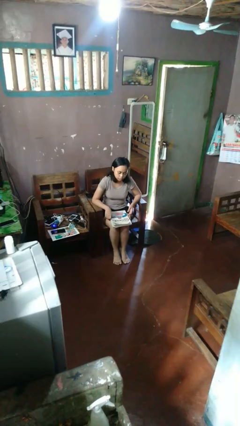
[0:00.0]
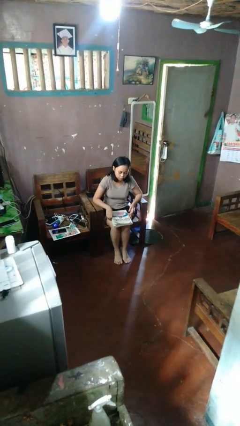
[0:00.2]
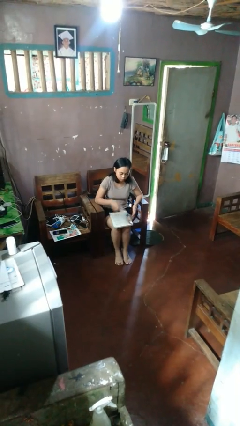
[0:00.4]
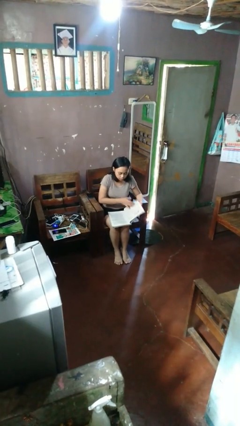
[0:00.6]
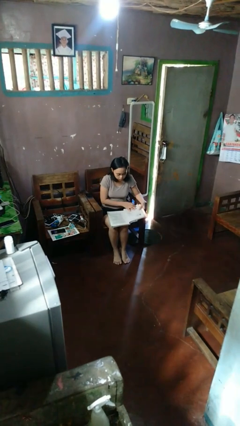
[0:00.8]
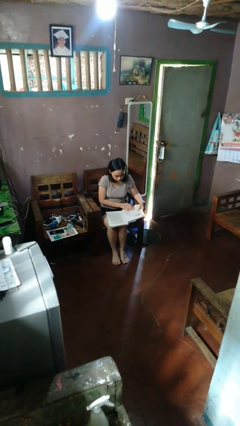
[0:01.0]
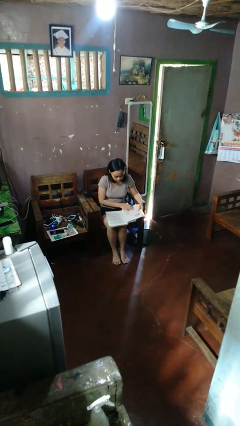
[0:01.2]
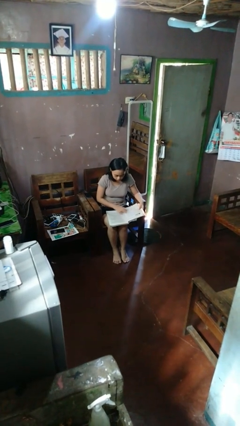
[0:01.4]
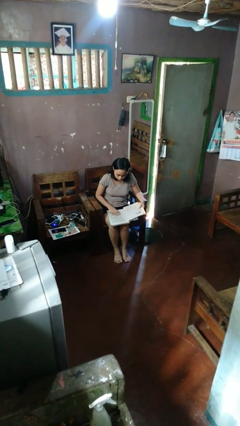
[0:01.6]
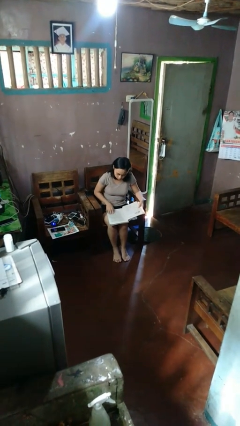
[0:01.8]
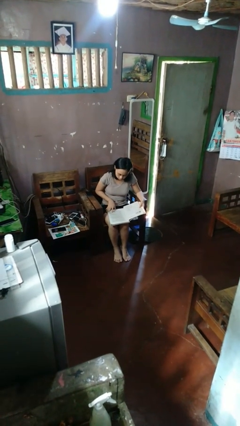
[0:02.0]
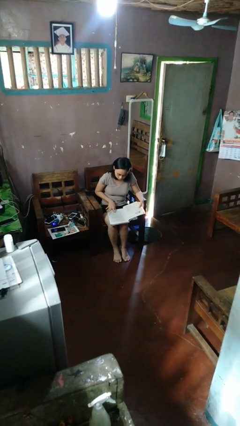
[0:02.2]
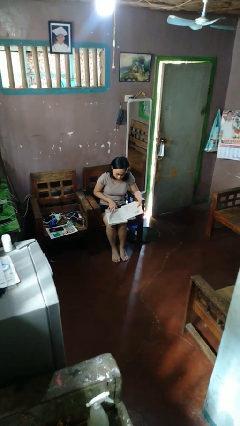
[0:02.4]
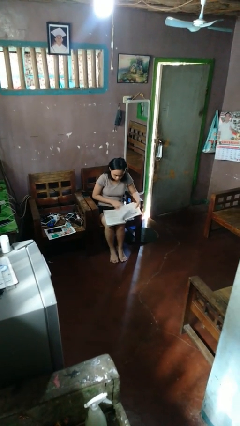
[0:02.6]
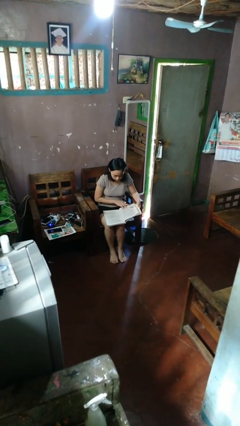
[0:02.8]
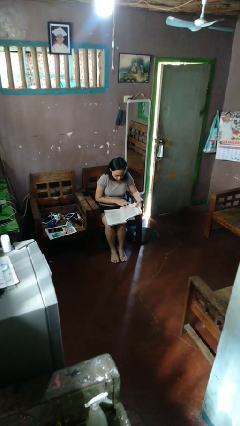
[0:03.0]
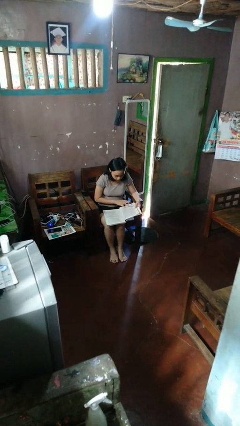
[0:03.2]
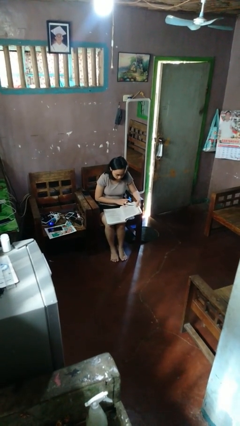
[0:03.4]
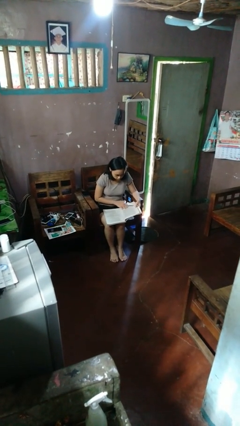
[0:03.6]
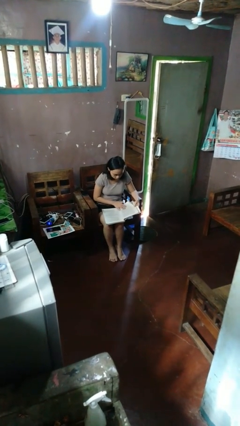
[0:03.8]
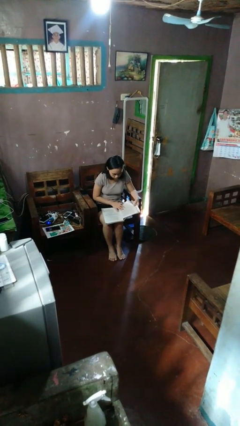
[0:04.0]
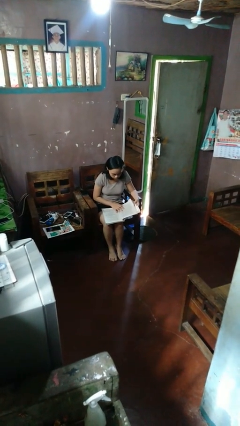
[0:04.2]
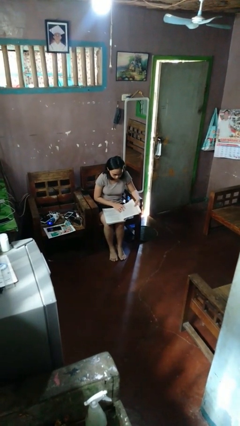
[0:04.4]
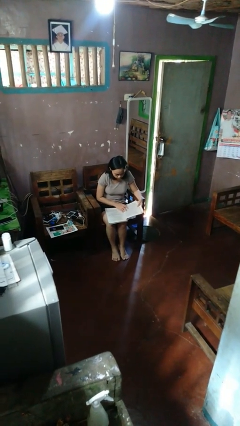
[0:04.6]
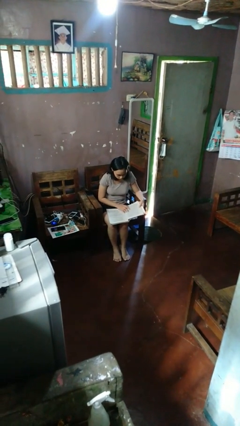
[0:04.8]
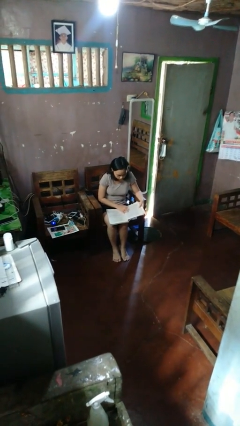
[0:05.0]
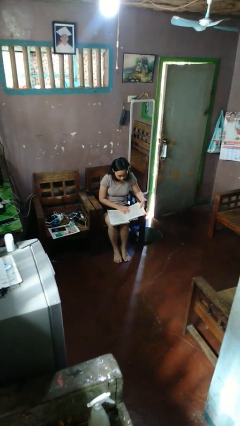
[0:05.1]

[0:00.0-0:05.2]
person reads book

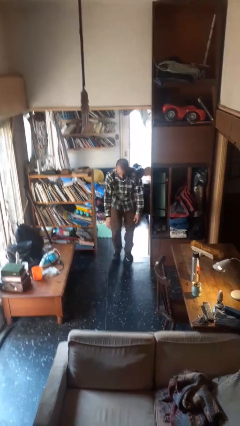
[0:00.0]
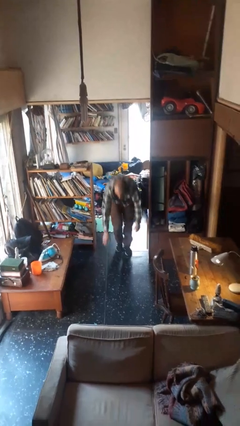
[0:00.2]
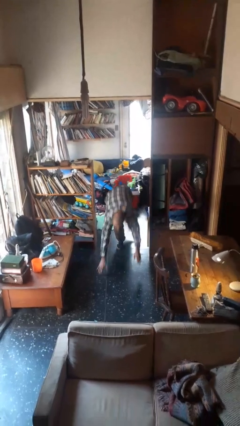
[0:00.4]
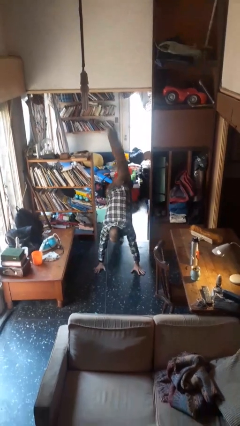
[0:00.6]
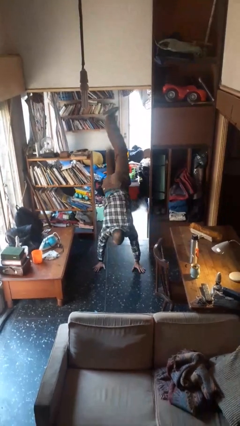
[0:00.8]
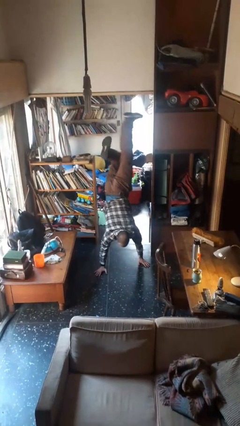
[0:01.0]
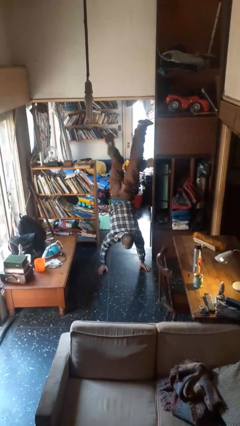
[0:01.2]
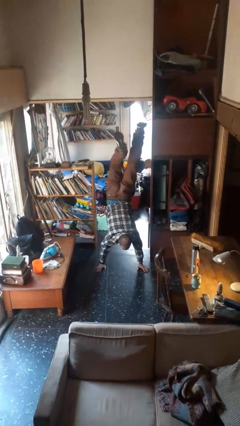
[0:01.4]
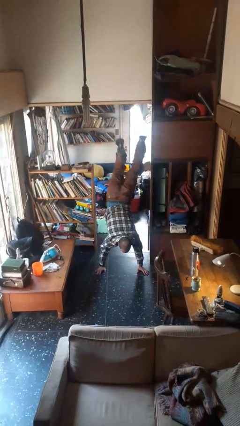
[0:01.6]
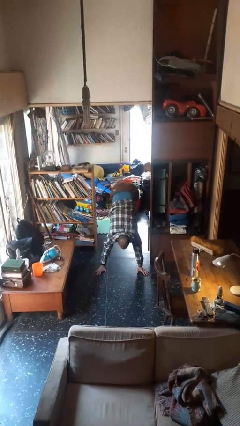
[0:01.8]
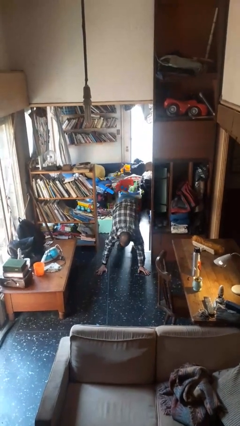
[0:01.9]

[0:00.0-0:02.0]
person handstand

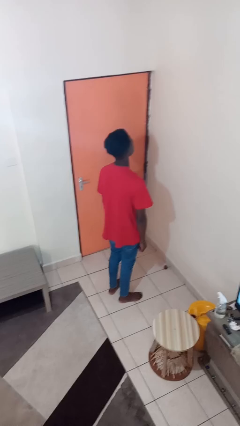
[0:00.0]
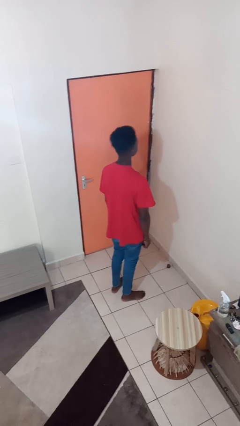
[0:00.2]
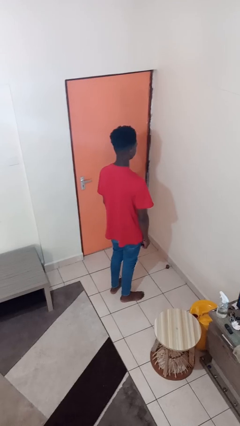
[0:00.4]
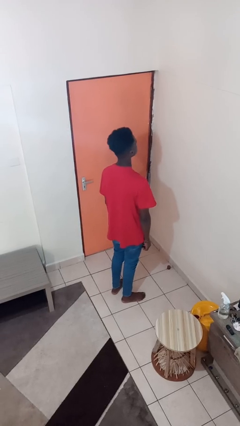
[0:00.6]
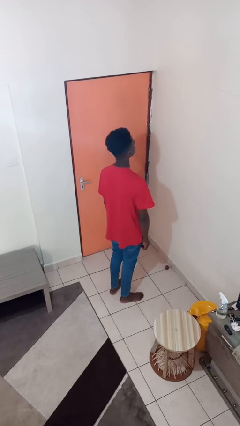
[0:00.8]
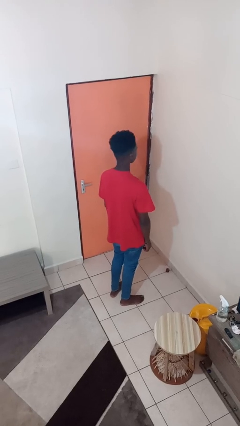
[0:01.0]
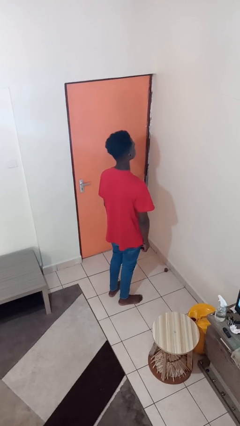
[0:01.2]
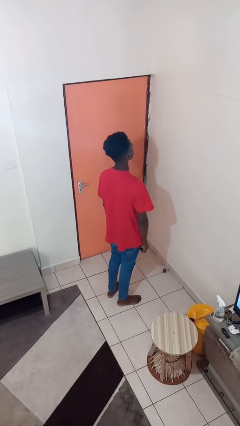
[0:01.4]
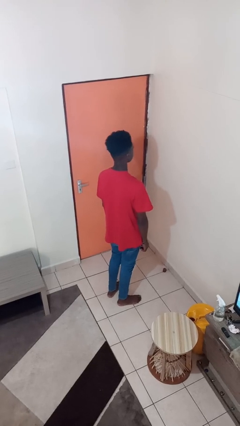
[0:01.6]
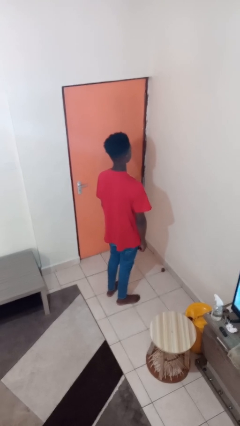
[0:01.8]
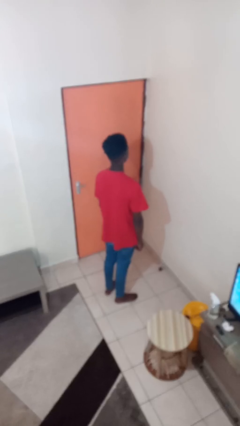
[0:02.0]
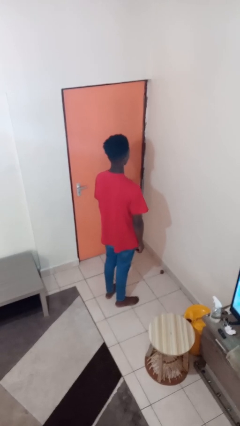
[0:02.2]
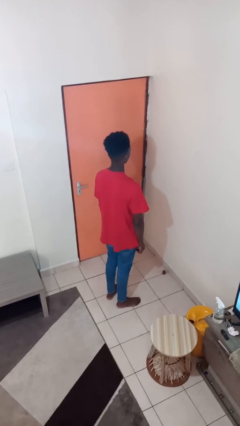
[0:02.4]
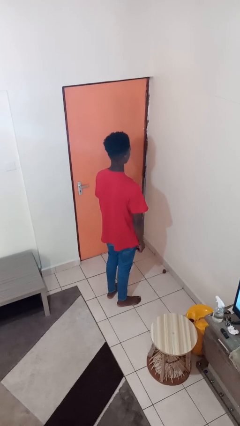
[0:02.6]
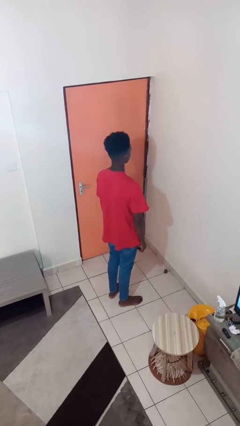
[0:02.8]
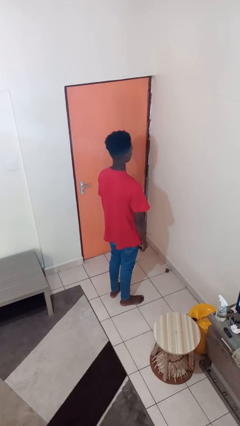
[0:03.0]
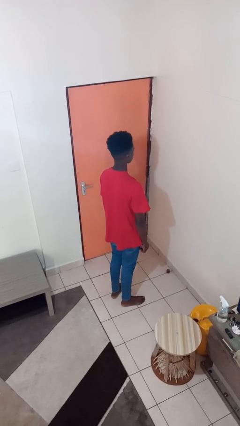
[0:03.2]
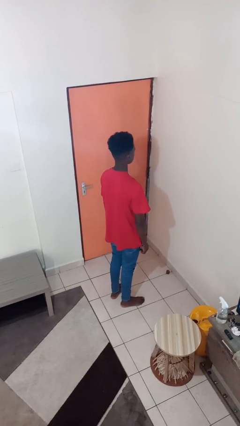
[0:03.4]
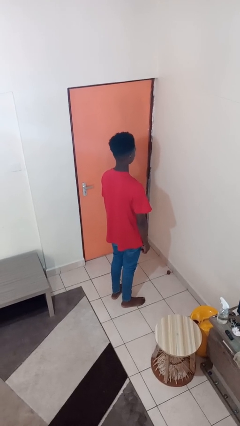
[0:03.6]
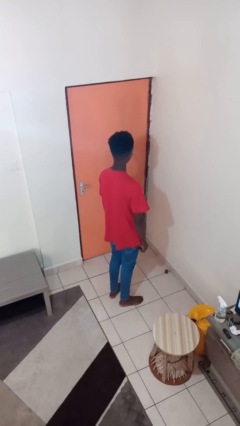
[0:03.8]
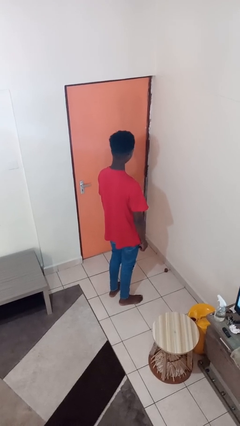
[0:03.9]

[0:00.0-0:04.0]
person nods head

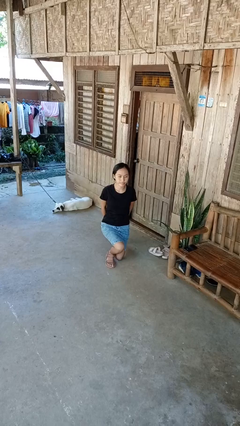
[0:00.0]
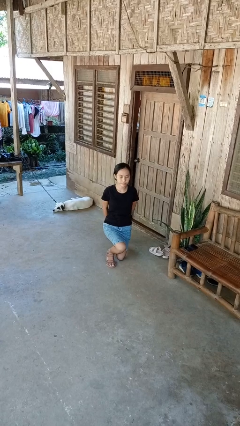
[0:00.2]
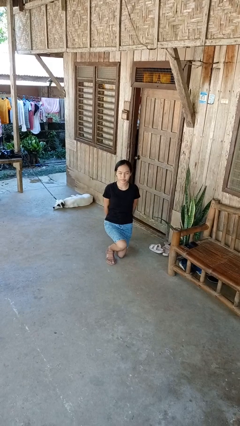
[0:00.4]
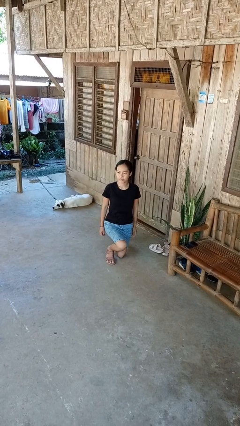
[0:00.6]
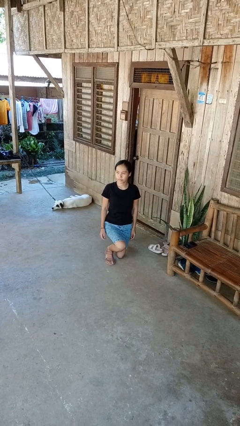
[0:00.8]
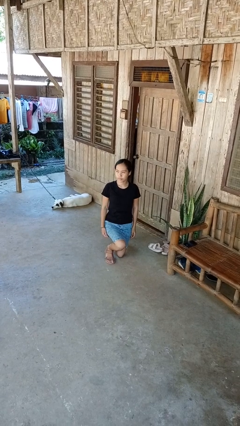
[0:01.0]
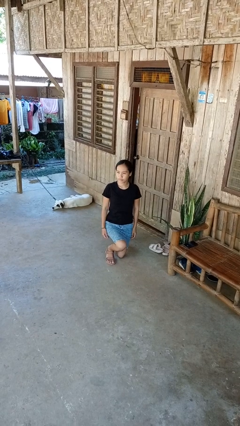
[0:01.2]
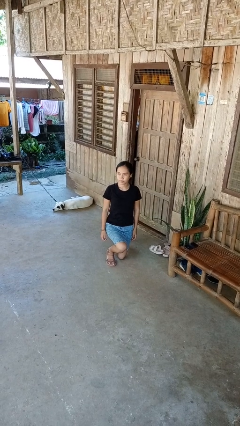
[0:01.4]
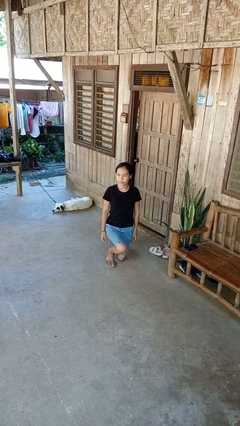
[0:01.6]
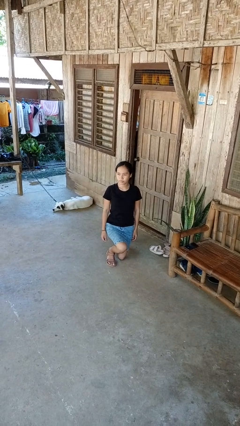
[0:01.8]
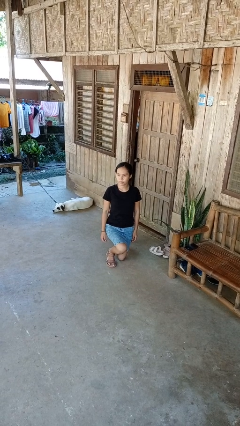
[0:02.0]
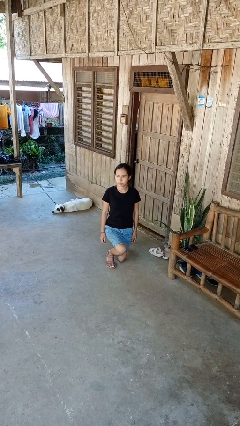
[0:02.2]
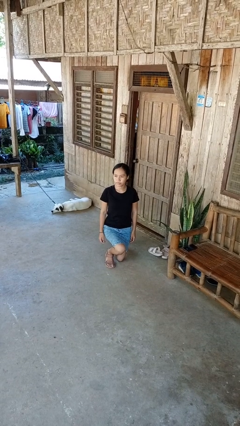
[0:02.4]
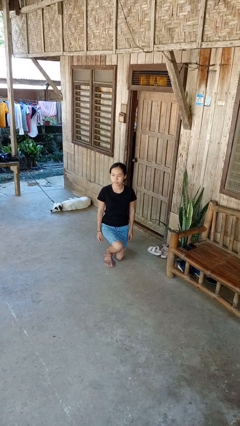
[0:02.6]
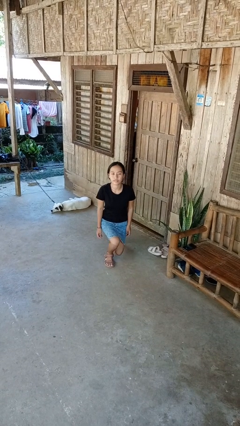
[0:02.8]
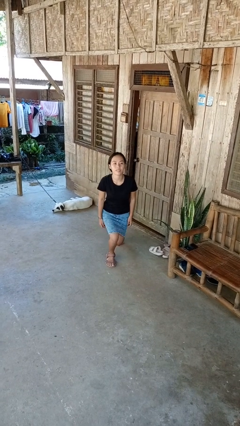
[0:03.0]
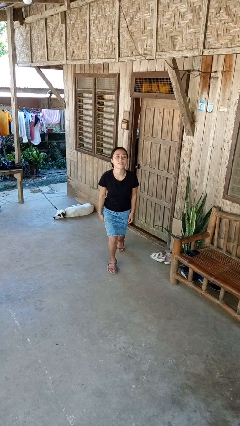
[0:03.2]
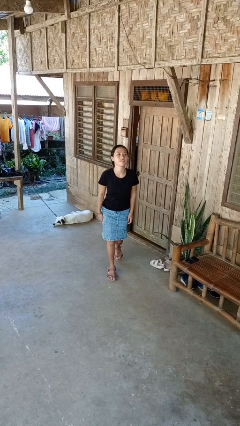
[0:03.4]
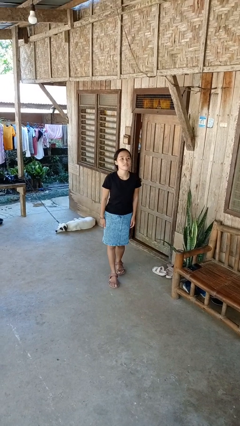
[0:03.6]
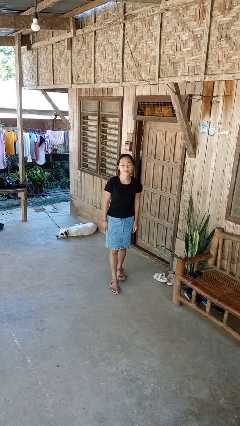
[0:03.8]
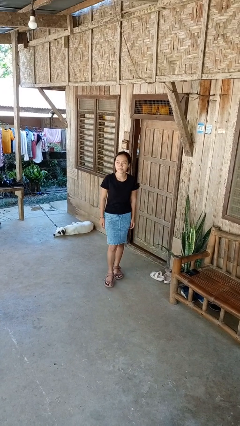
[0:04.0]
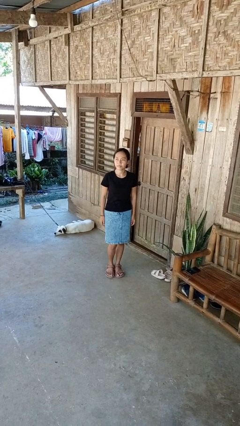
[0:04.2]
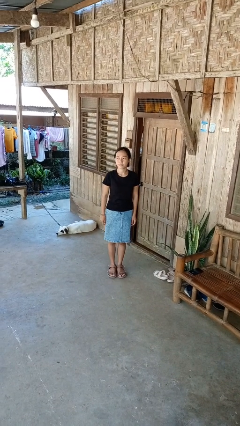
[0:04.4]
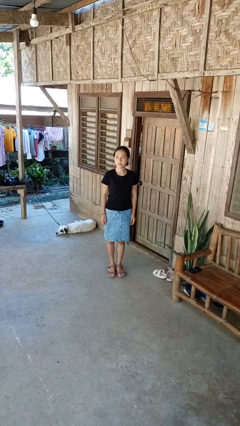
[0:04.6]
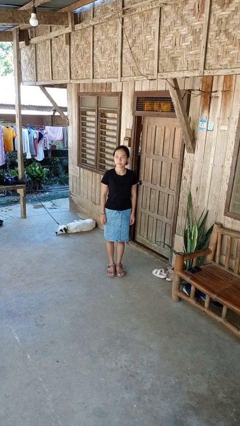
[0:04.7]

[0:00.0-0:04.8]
person kneels

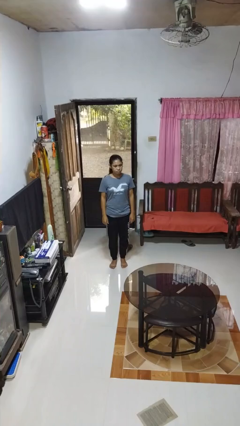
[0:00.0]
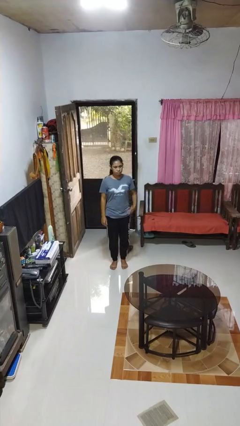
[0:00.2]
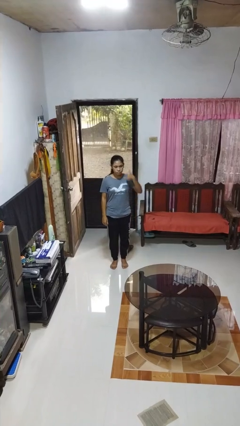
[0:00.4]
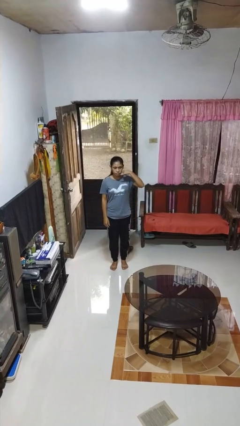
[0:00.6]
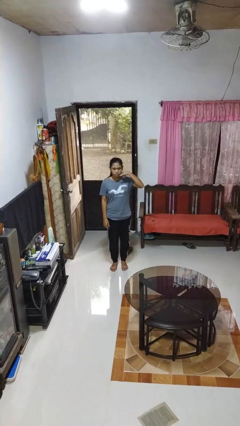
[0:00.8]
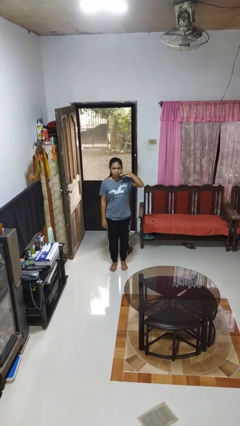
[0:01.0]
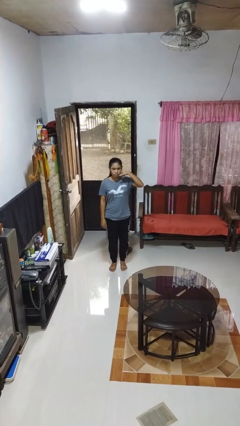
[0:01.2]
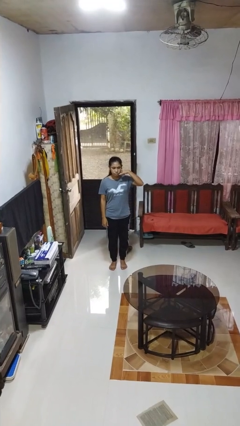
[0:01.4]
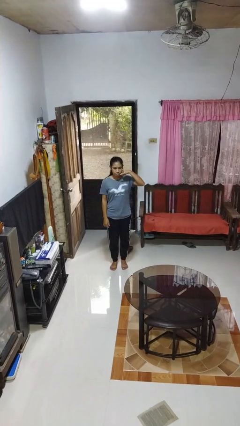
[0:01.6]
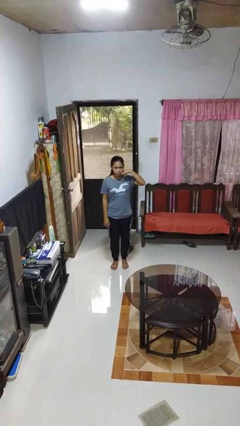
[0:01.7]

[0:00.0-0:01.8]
person gestures call me
